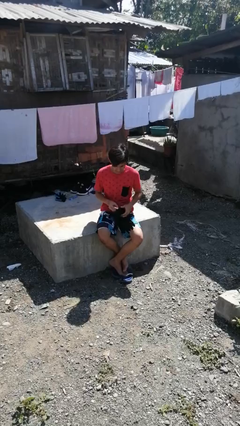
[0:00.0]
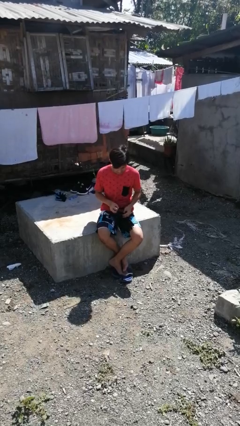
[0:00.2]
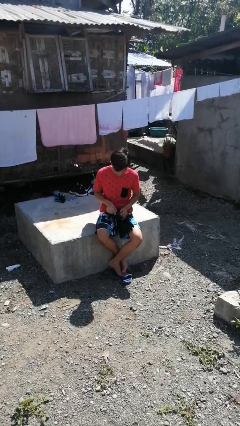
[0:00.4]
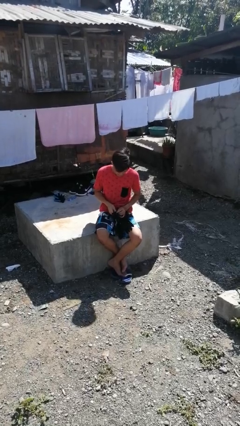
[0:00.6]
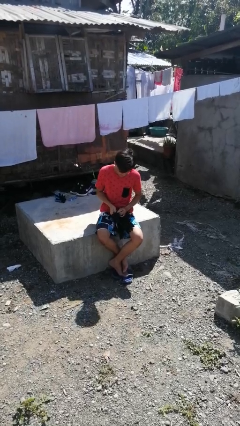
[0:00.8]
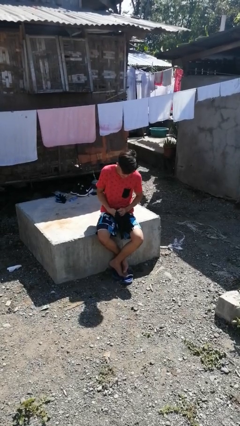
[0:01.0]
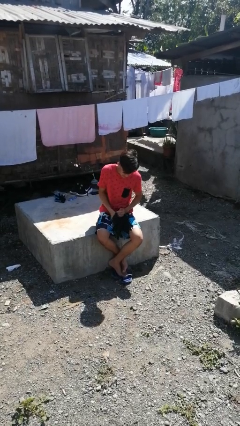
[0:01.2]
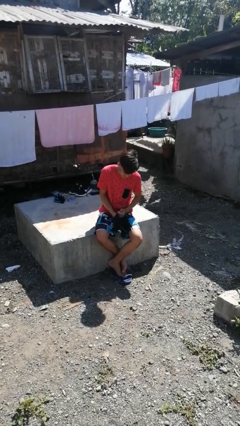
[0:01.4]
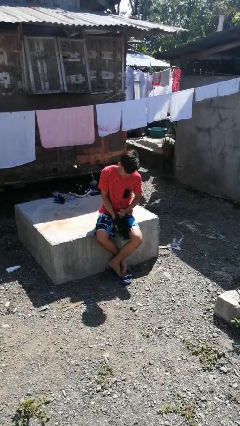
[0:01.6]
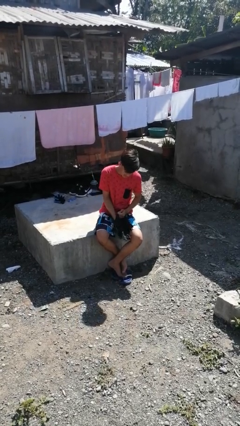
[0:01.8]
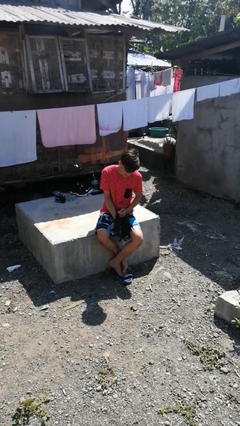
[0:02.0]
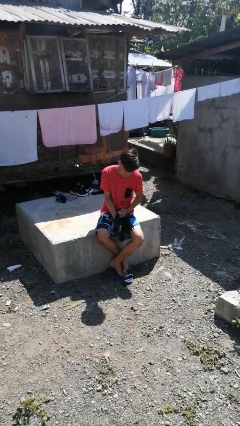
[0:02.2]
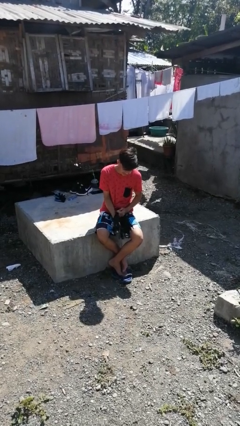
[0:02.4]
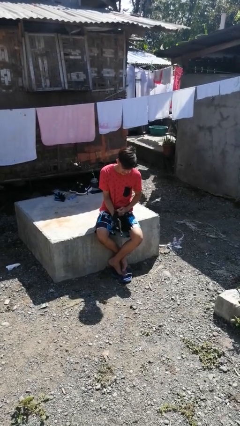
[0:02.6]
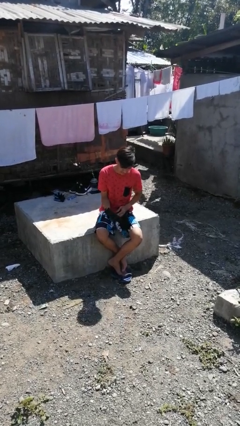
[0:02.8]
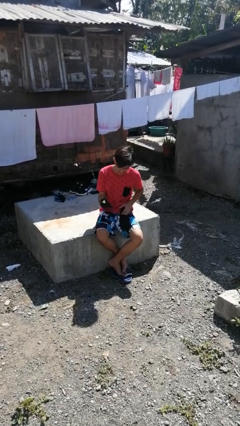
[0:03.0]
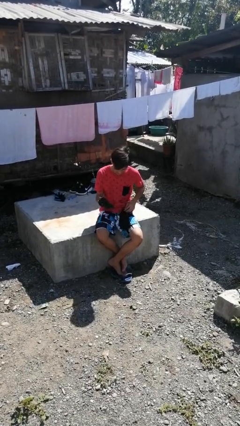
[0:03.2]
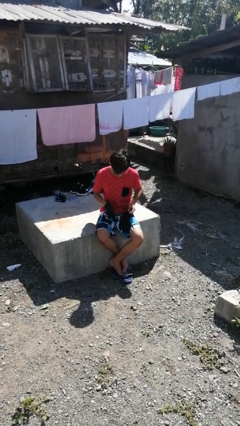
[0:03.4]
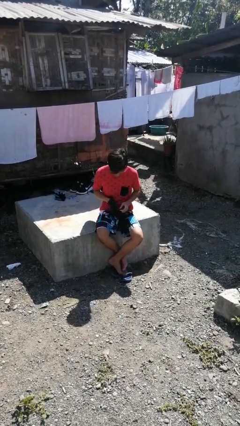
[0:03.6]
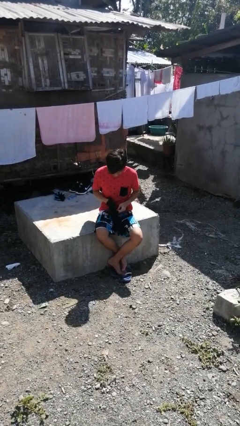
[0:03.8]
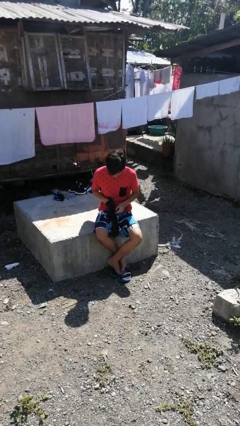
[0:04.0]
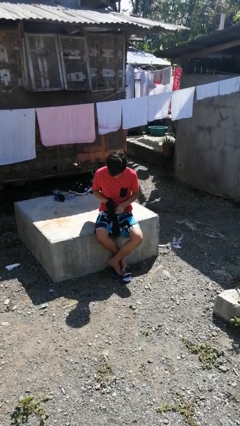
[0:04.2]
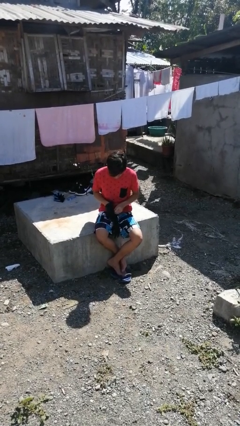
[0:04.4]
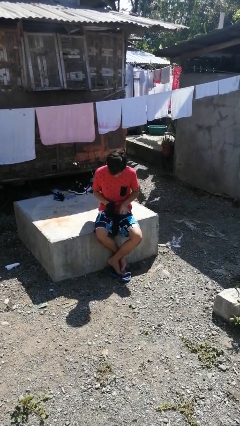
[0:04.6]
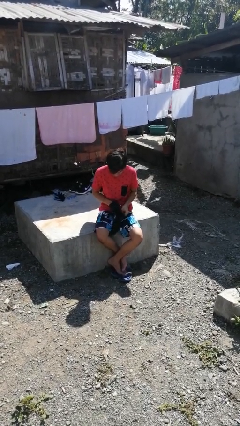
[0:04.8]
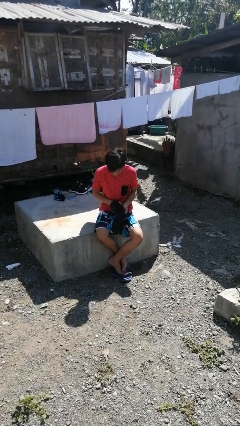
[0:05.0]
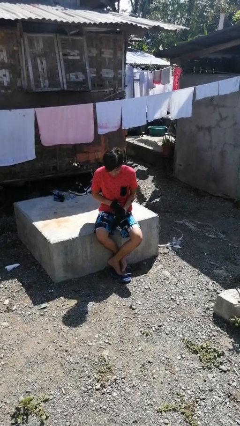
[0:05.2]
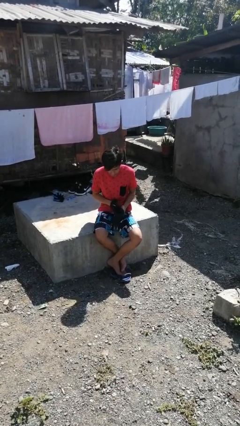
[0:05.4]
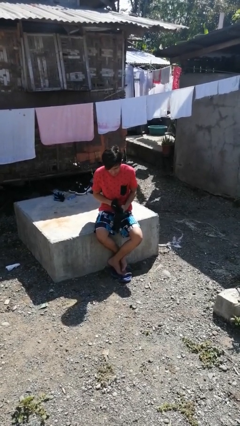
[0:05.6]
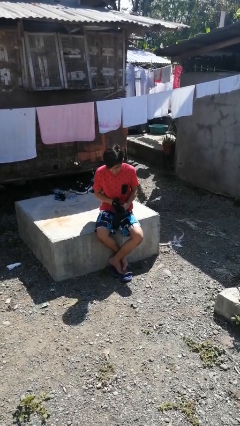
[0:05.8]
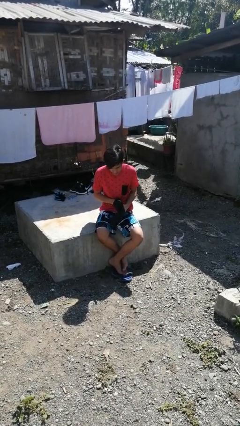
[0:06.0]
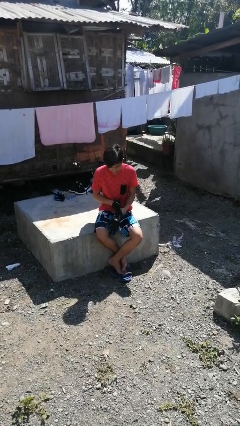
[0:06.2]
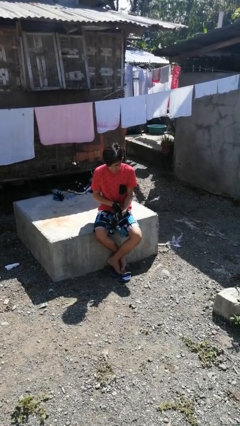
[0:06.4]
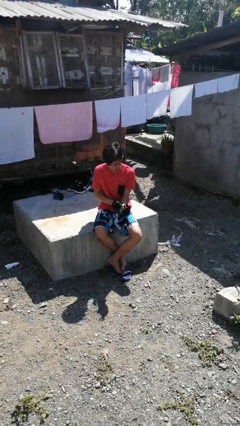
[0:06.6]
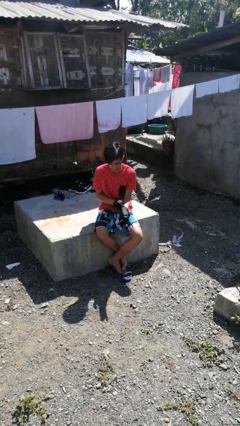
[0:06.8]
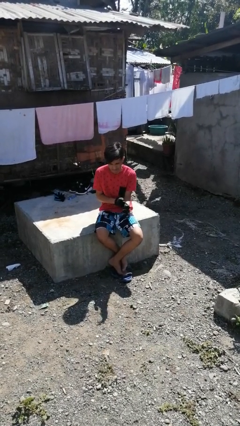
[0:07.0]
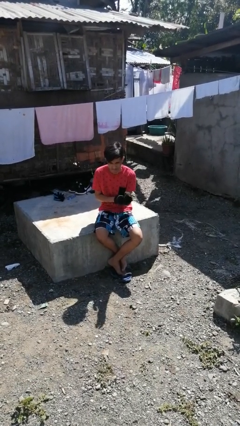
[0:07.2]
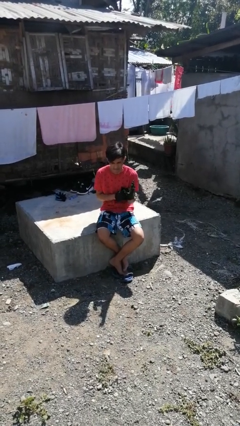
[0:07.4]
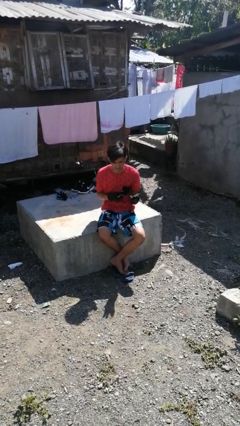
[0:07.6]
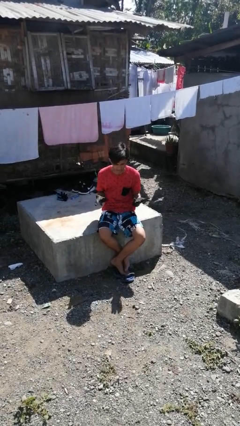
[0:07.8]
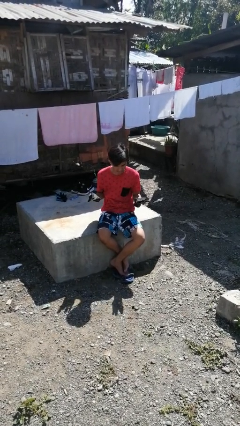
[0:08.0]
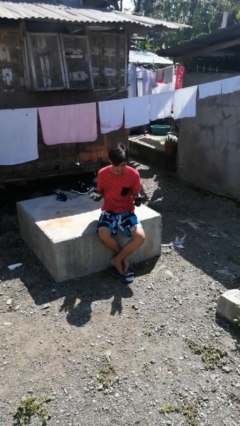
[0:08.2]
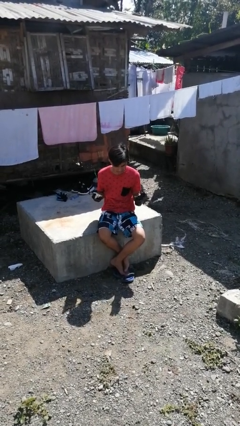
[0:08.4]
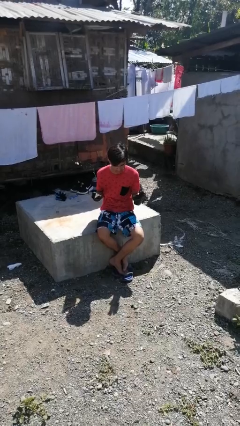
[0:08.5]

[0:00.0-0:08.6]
person puts on gloves

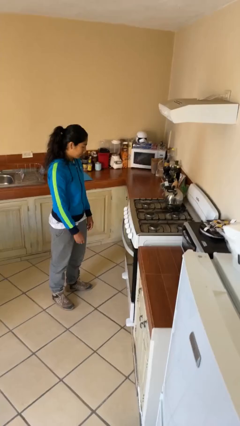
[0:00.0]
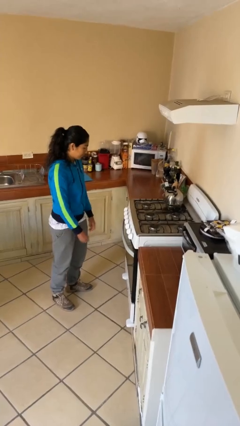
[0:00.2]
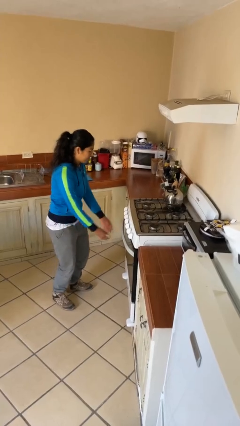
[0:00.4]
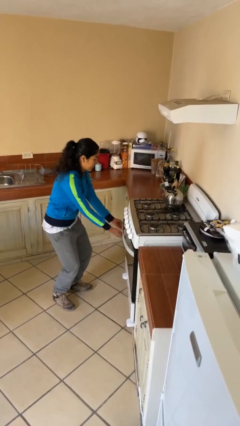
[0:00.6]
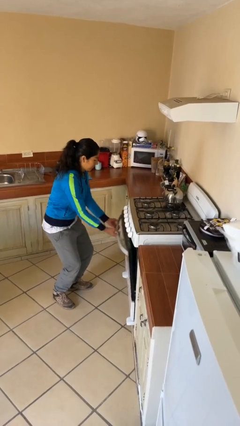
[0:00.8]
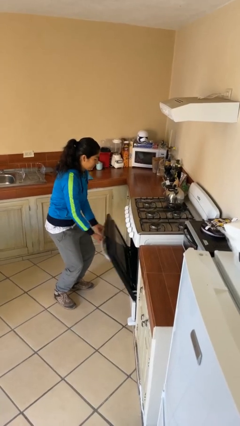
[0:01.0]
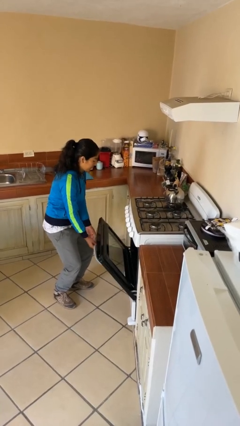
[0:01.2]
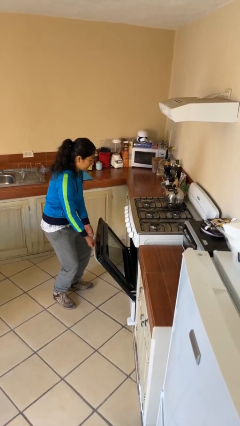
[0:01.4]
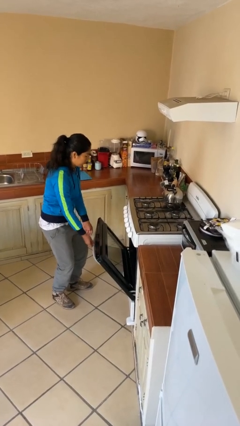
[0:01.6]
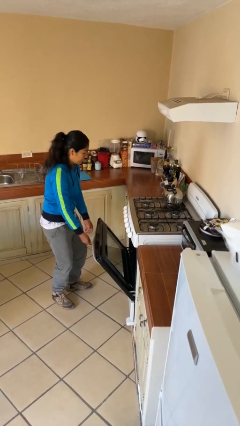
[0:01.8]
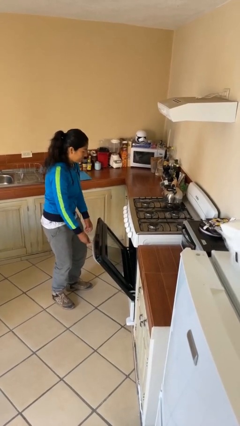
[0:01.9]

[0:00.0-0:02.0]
person opens oven door

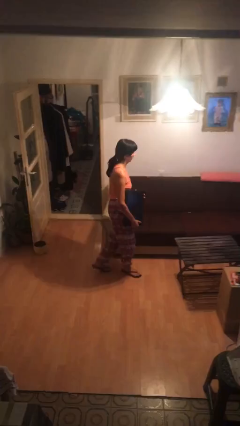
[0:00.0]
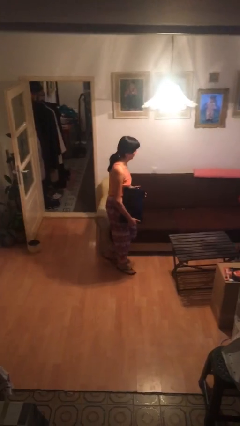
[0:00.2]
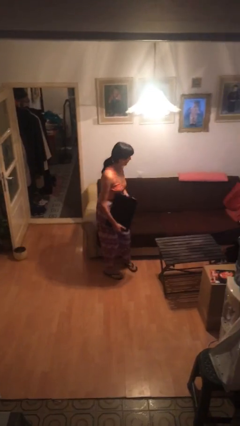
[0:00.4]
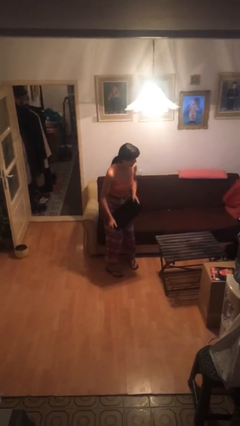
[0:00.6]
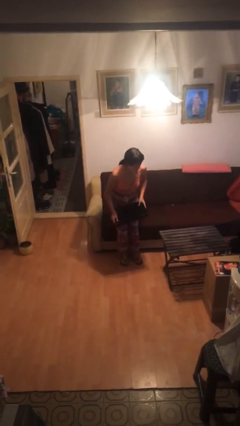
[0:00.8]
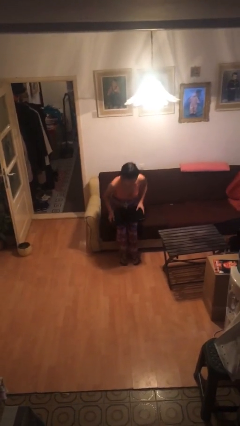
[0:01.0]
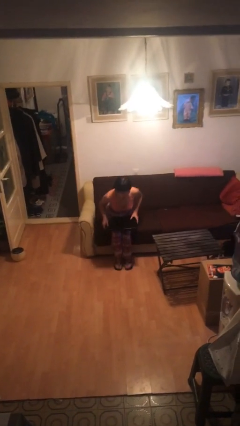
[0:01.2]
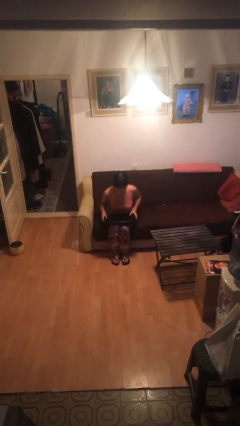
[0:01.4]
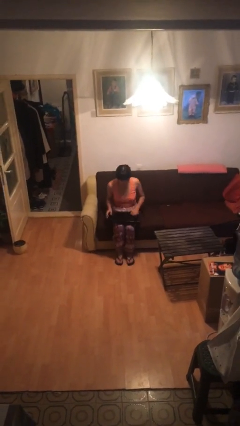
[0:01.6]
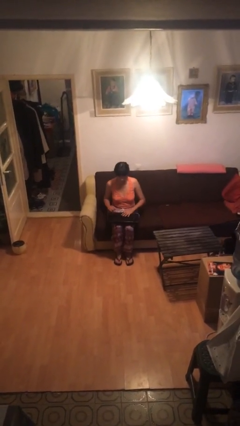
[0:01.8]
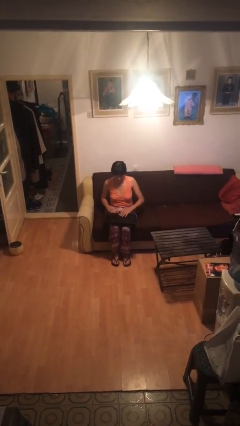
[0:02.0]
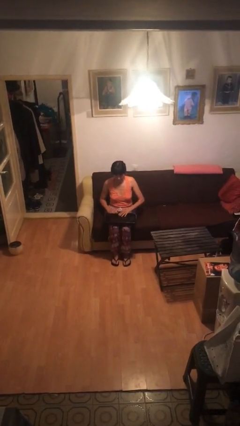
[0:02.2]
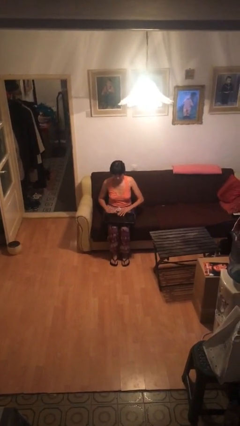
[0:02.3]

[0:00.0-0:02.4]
person sits down

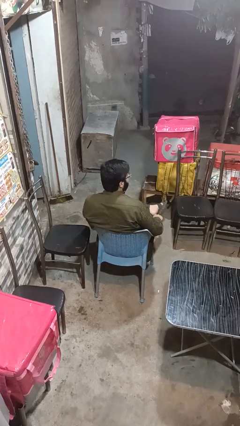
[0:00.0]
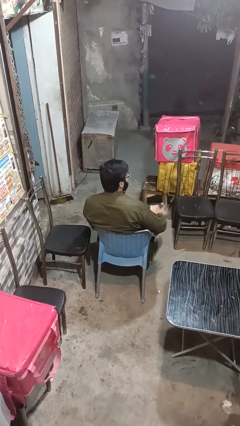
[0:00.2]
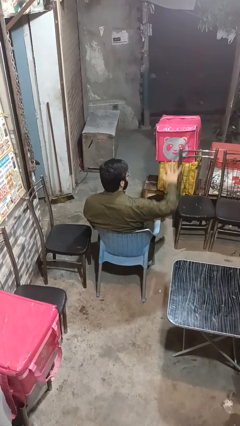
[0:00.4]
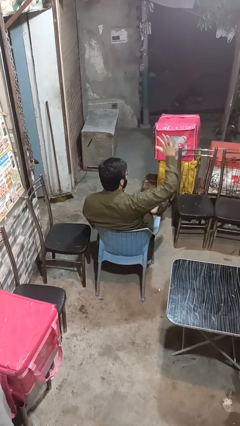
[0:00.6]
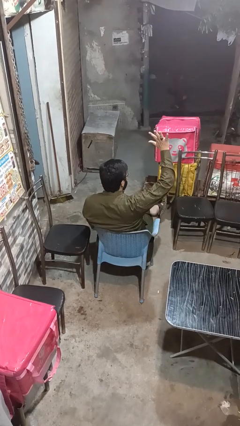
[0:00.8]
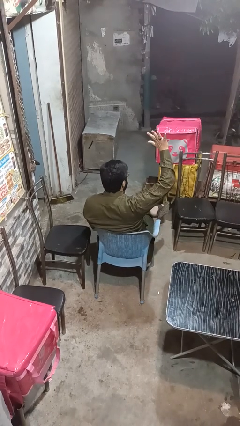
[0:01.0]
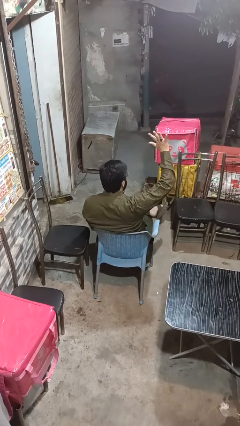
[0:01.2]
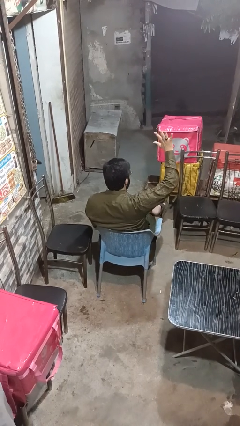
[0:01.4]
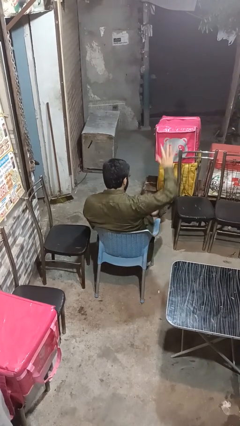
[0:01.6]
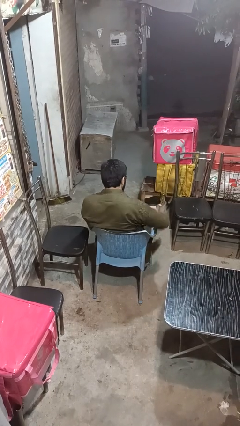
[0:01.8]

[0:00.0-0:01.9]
person gestures number five

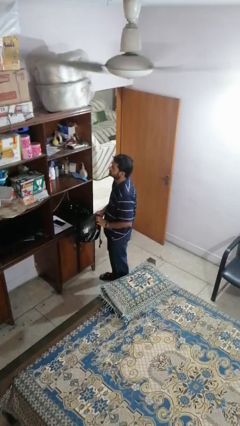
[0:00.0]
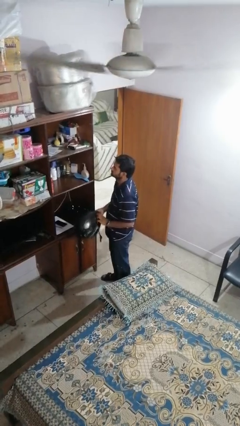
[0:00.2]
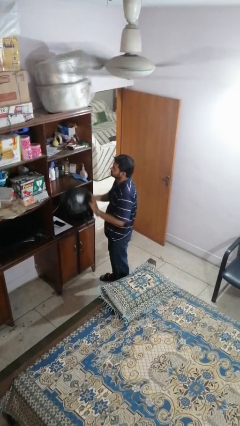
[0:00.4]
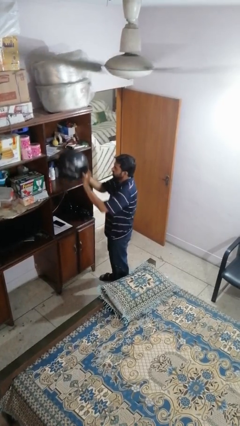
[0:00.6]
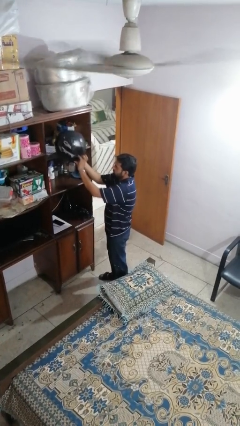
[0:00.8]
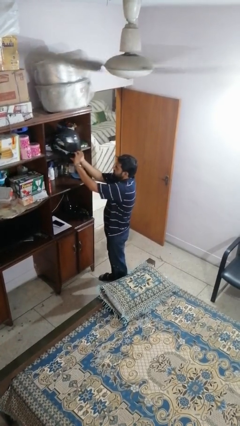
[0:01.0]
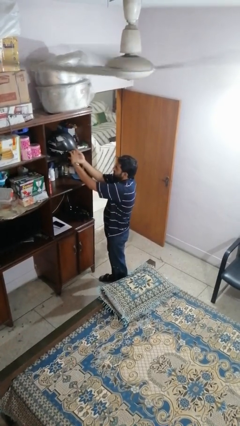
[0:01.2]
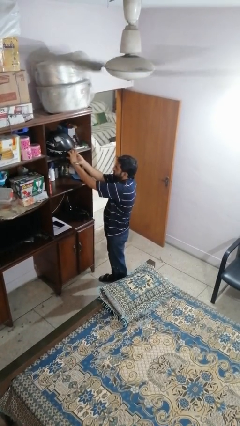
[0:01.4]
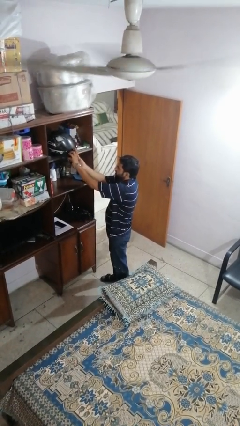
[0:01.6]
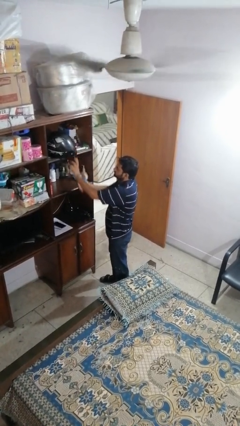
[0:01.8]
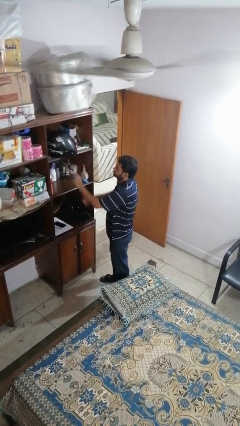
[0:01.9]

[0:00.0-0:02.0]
person puts down object on shelf

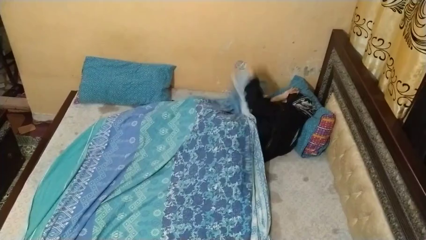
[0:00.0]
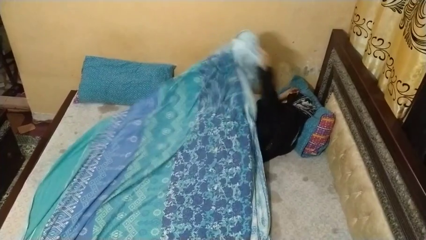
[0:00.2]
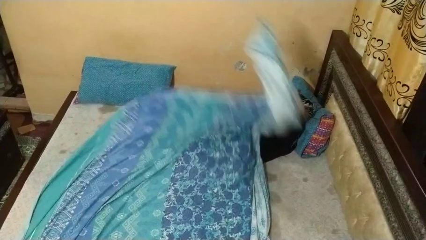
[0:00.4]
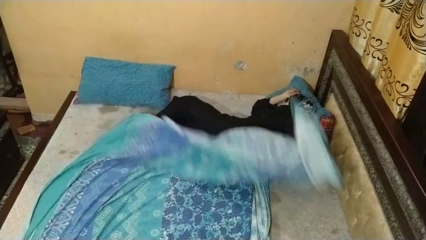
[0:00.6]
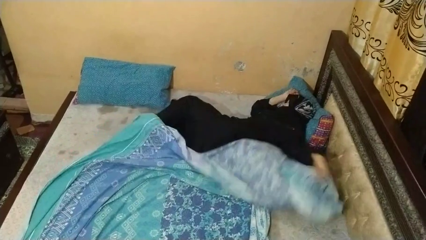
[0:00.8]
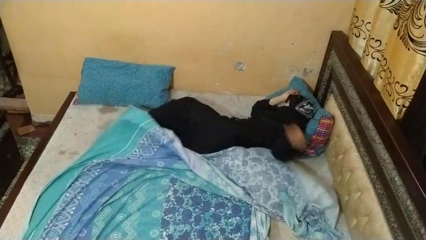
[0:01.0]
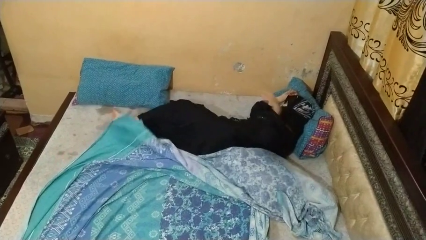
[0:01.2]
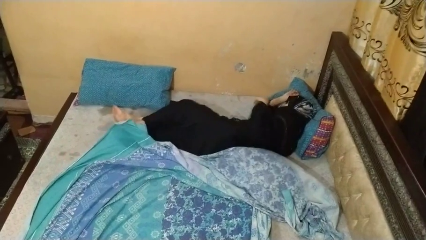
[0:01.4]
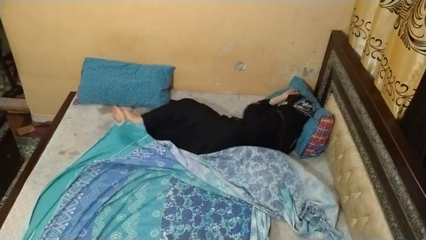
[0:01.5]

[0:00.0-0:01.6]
person uncovers with bedsheets
